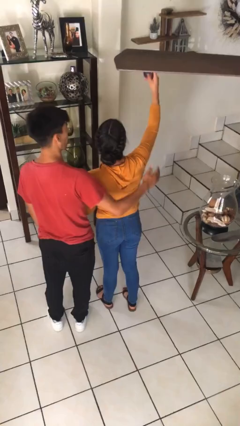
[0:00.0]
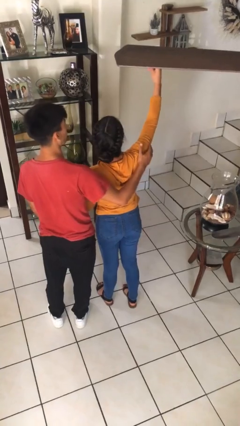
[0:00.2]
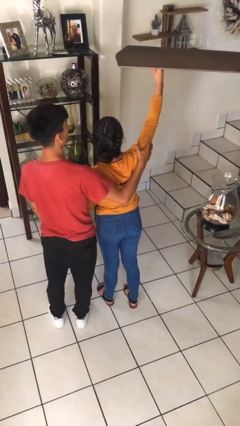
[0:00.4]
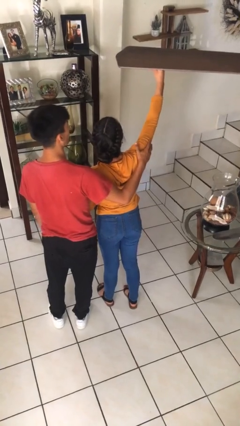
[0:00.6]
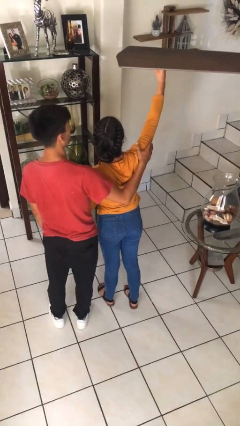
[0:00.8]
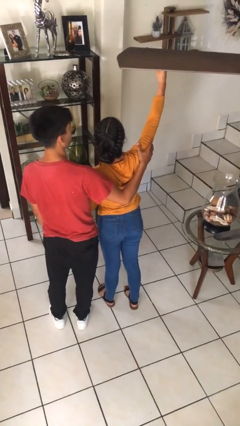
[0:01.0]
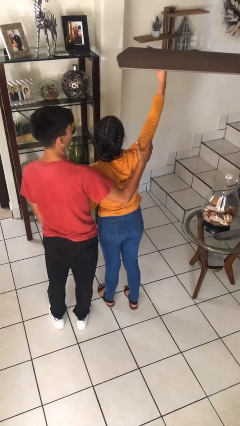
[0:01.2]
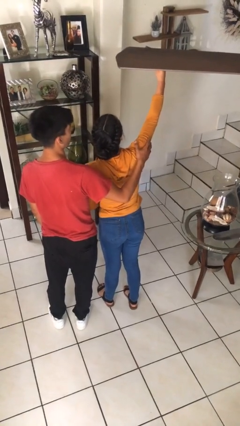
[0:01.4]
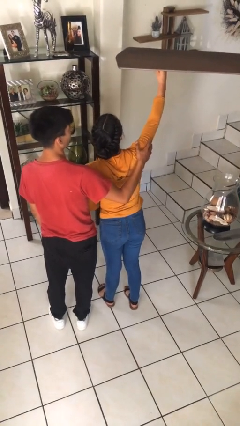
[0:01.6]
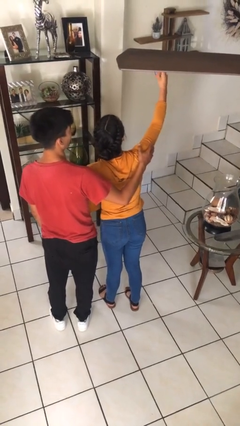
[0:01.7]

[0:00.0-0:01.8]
person takes selfie with person

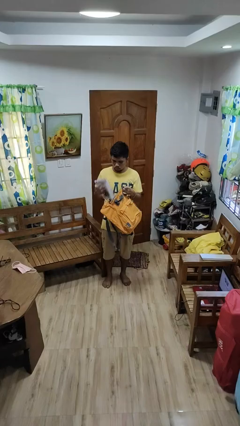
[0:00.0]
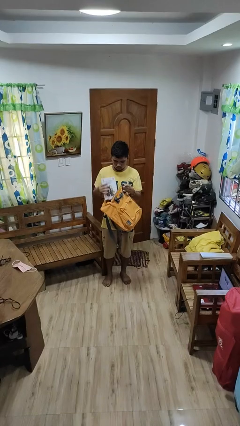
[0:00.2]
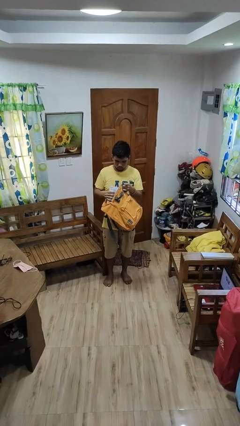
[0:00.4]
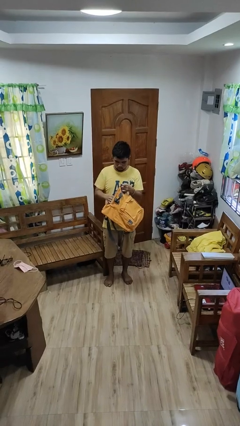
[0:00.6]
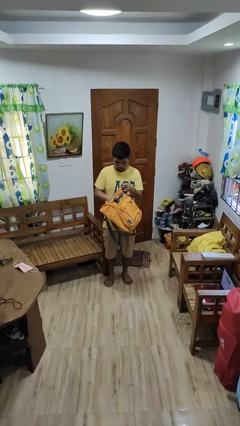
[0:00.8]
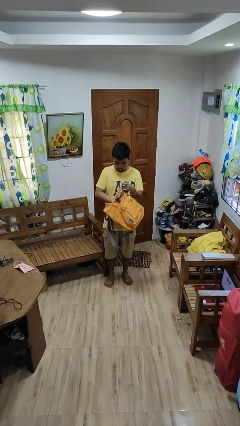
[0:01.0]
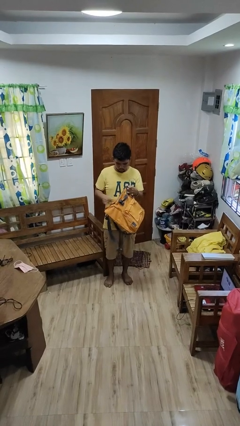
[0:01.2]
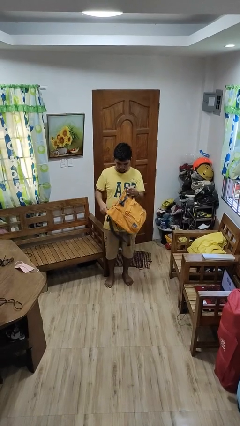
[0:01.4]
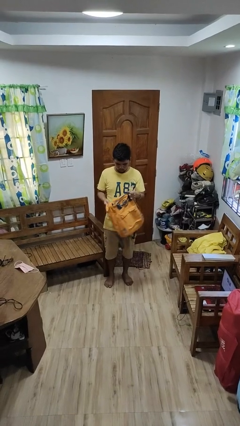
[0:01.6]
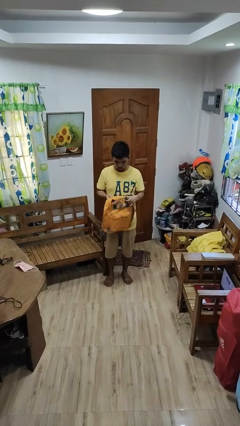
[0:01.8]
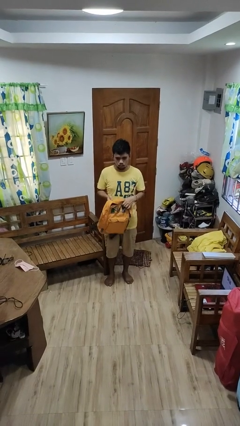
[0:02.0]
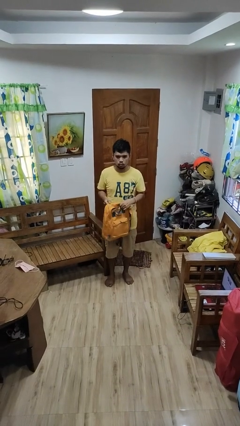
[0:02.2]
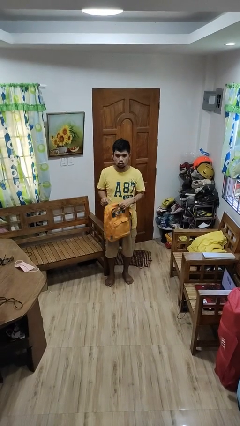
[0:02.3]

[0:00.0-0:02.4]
person puts object into backpack

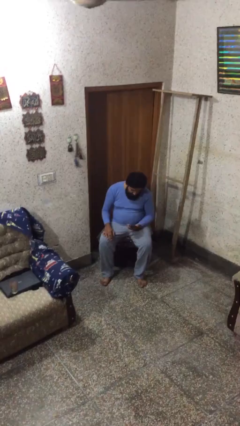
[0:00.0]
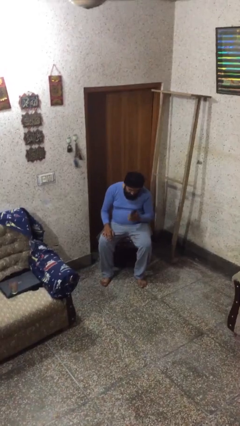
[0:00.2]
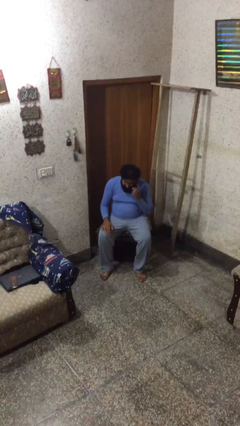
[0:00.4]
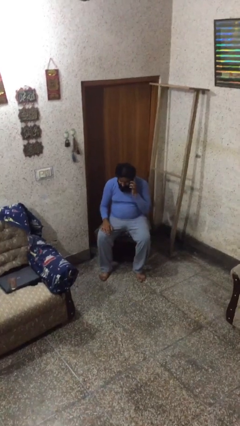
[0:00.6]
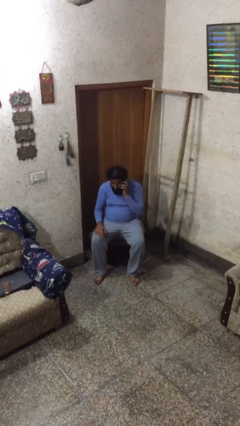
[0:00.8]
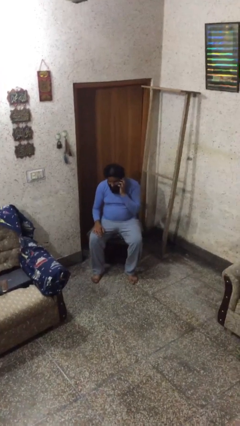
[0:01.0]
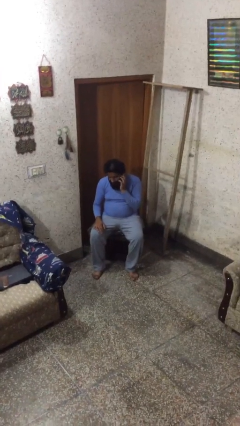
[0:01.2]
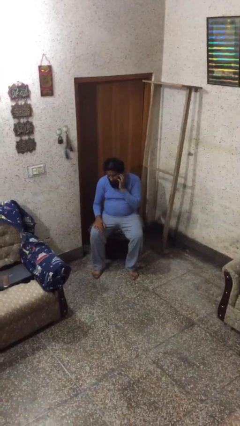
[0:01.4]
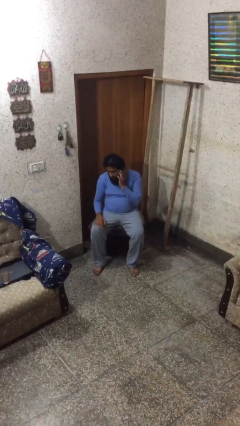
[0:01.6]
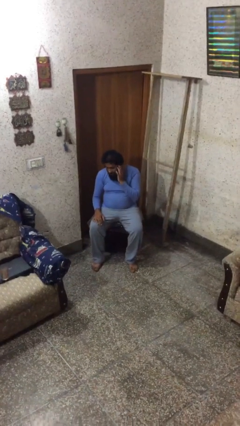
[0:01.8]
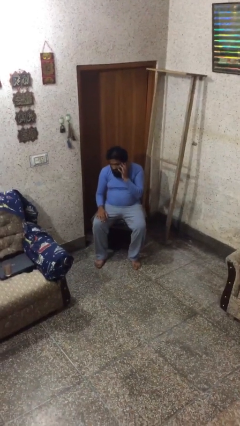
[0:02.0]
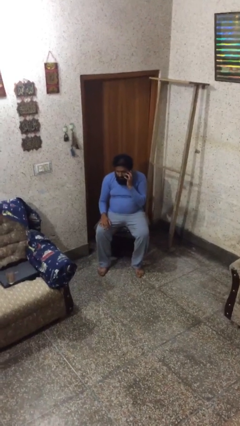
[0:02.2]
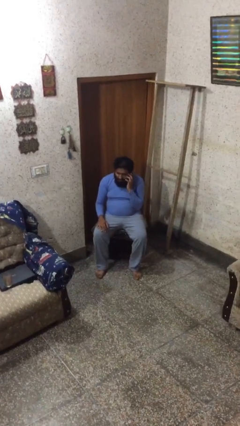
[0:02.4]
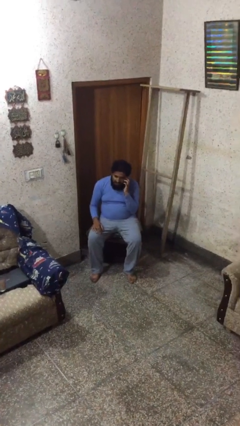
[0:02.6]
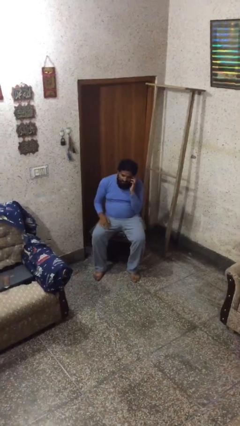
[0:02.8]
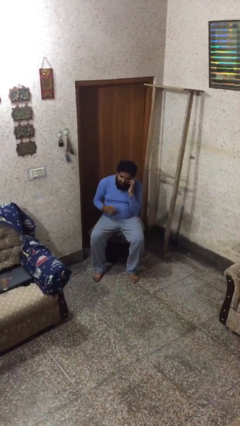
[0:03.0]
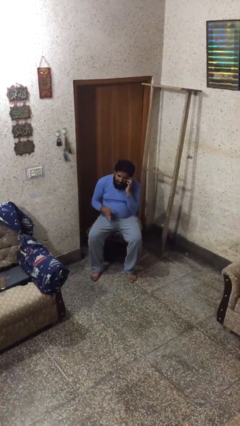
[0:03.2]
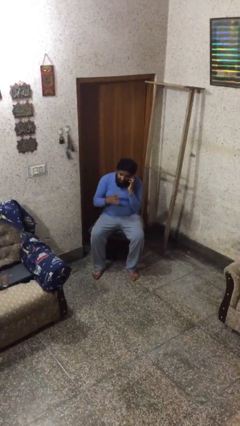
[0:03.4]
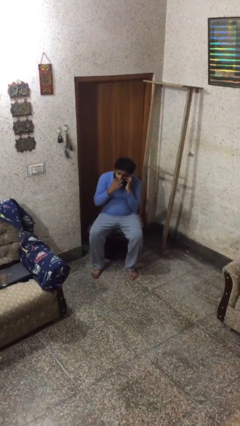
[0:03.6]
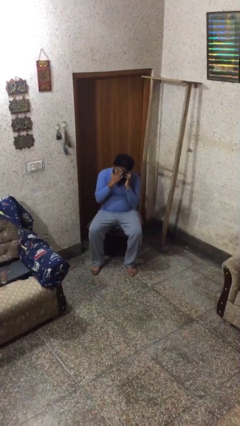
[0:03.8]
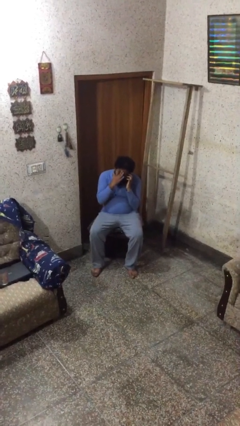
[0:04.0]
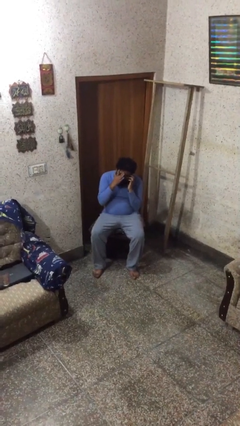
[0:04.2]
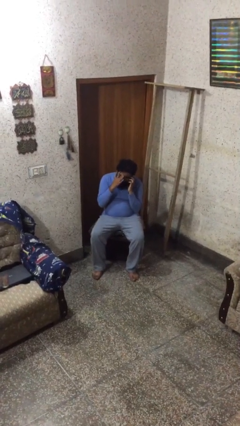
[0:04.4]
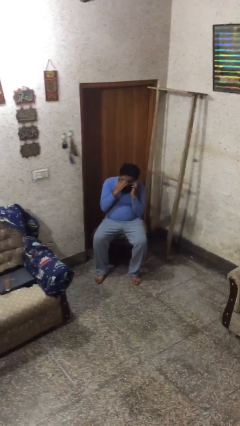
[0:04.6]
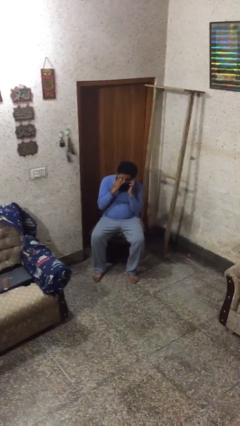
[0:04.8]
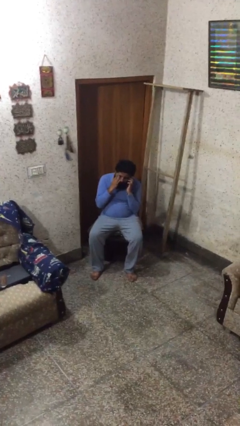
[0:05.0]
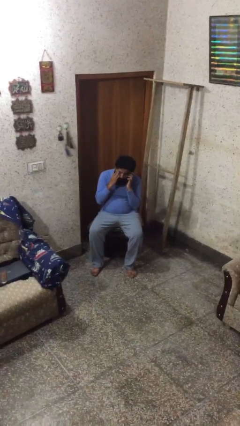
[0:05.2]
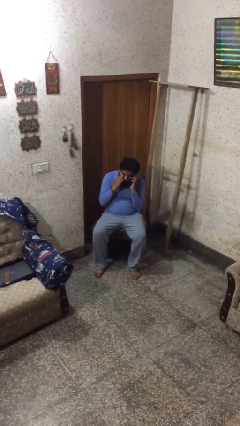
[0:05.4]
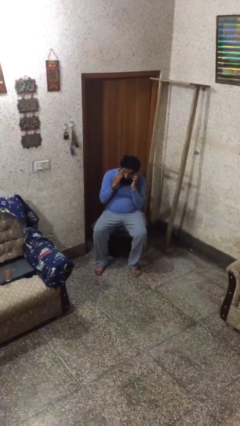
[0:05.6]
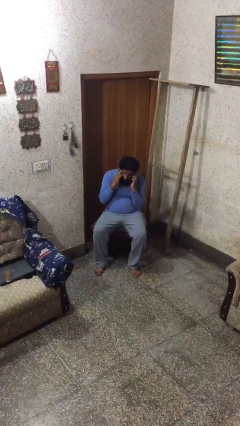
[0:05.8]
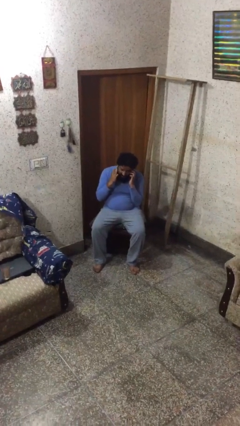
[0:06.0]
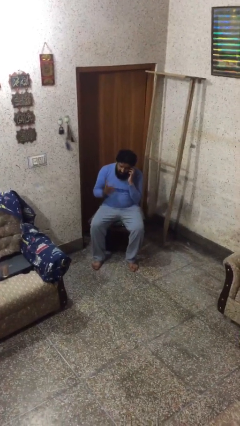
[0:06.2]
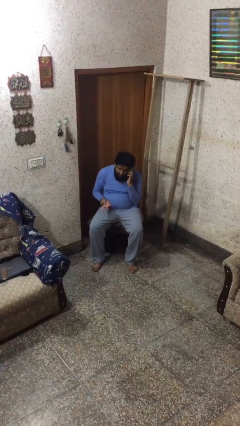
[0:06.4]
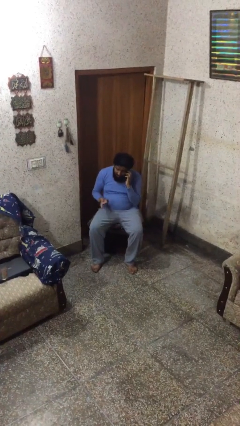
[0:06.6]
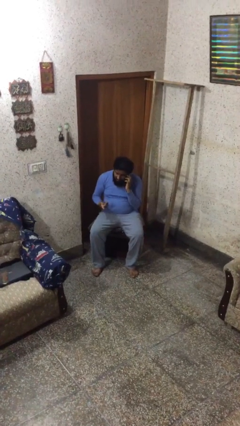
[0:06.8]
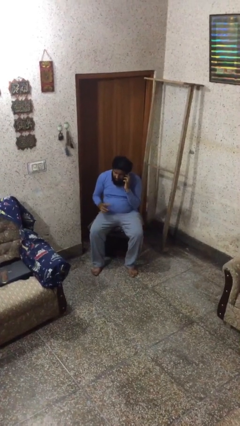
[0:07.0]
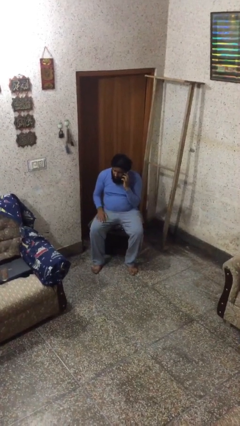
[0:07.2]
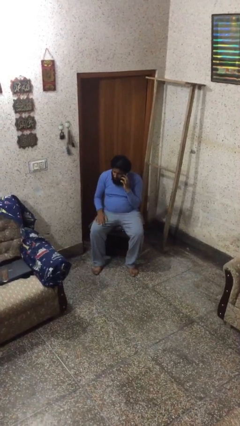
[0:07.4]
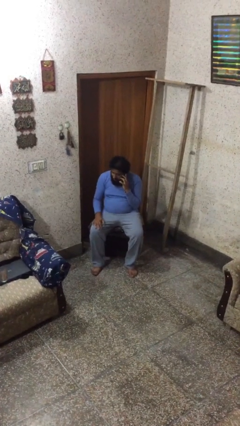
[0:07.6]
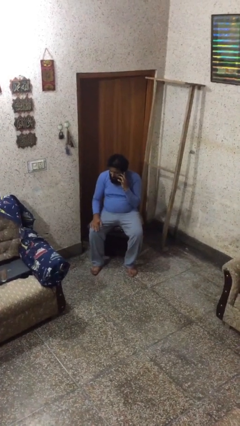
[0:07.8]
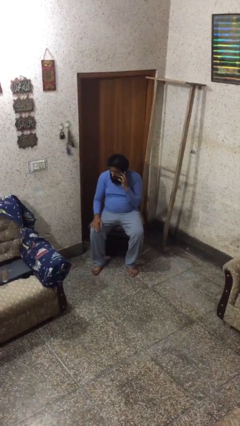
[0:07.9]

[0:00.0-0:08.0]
person talks on phone

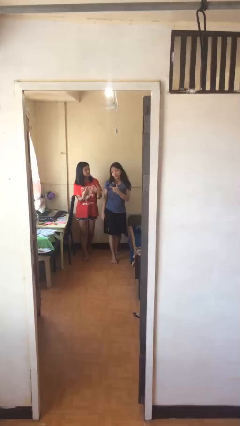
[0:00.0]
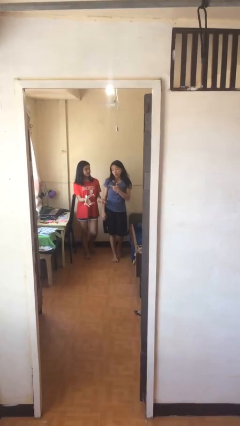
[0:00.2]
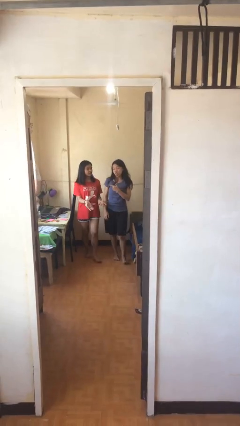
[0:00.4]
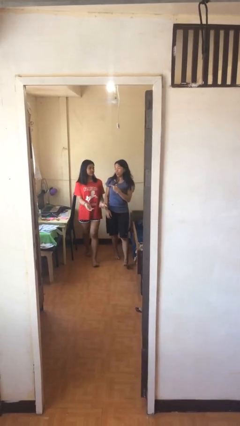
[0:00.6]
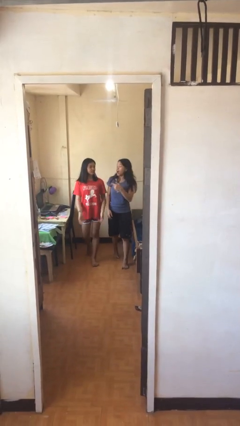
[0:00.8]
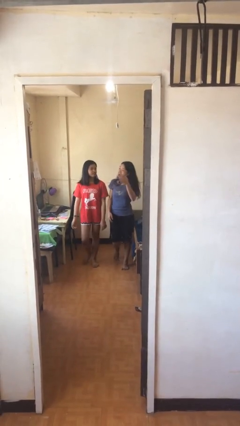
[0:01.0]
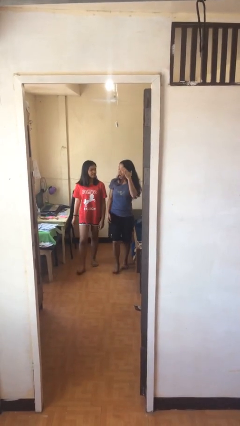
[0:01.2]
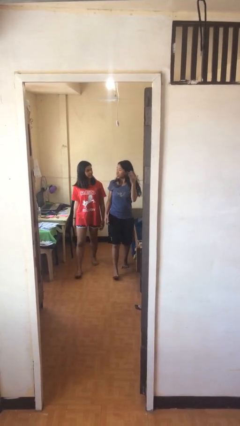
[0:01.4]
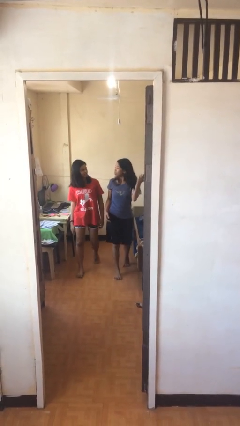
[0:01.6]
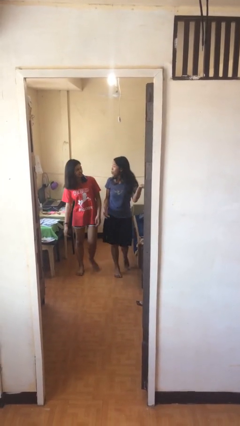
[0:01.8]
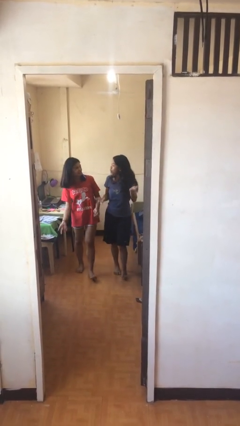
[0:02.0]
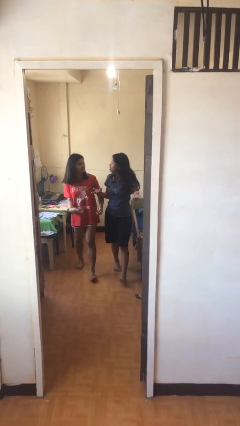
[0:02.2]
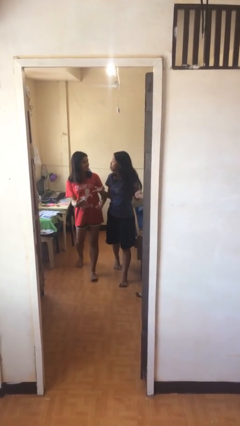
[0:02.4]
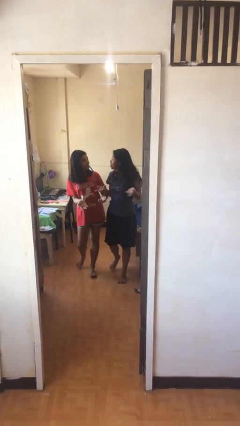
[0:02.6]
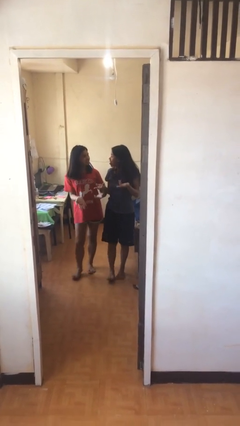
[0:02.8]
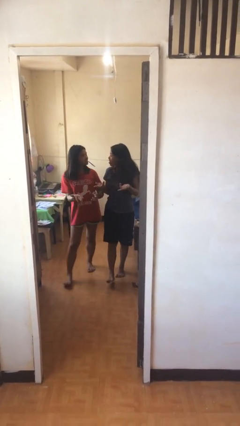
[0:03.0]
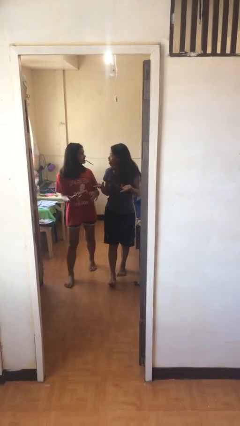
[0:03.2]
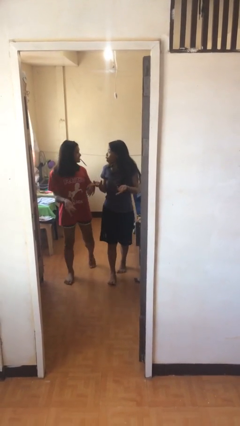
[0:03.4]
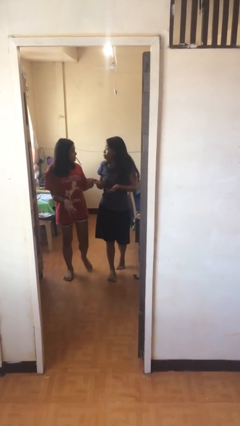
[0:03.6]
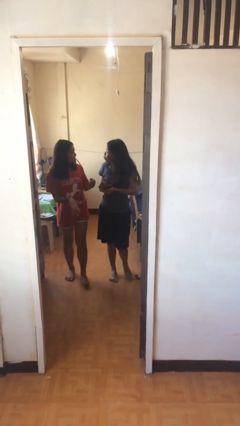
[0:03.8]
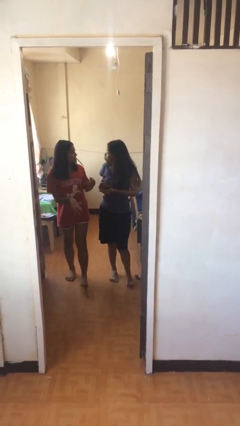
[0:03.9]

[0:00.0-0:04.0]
person talks to person

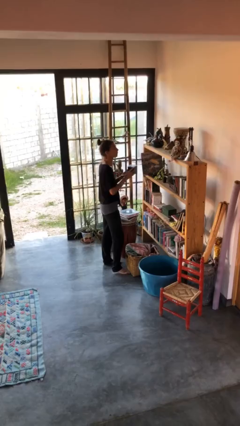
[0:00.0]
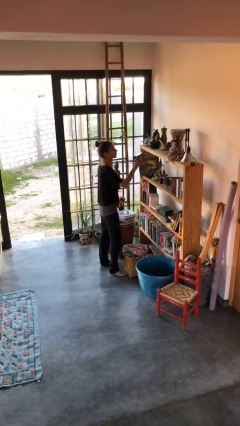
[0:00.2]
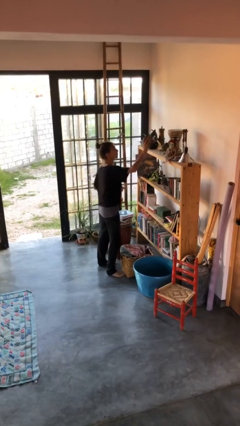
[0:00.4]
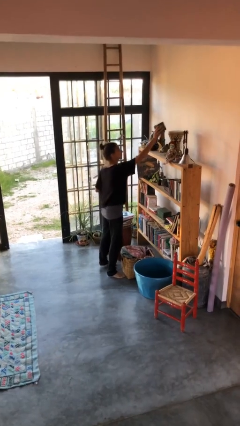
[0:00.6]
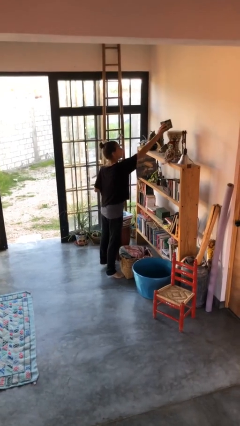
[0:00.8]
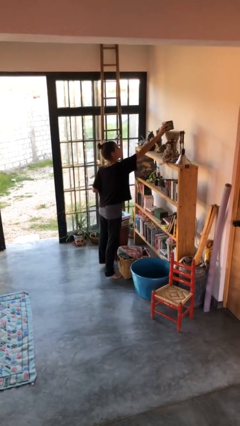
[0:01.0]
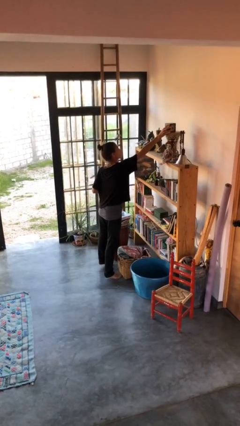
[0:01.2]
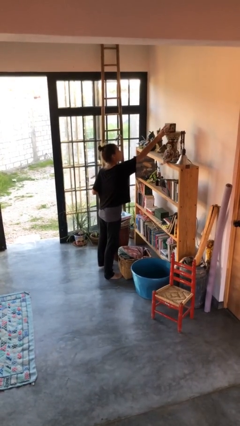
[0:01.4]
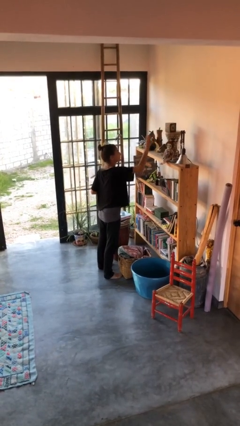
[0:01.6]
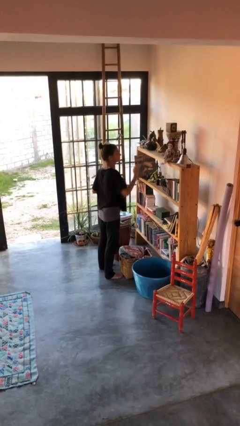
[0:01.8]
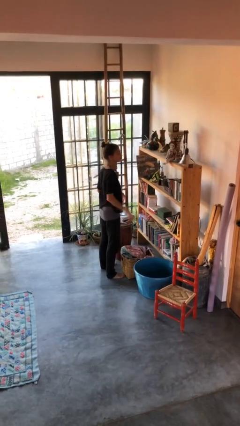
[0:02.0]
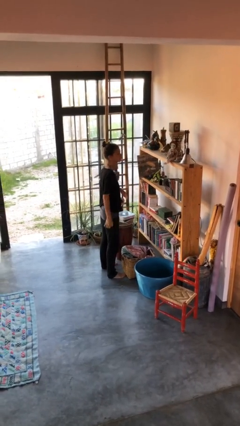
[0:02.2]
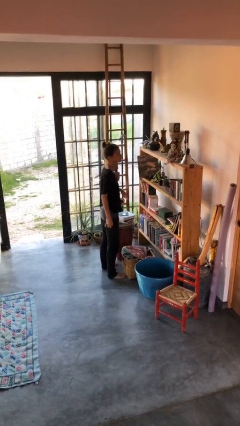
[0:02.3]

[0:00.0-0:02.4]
person puts down object on countertop
